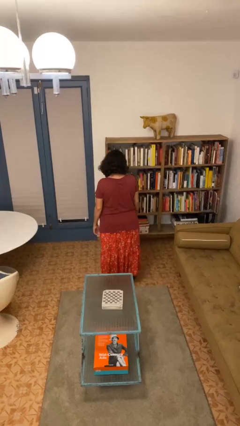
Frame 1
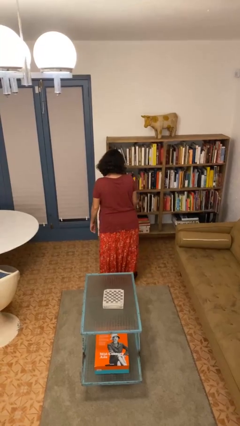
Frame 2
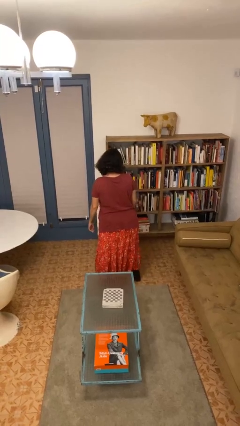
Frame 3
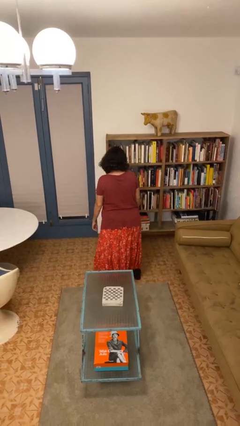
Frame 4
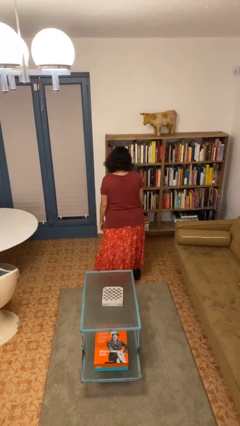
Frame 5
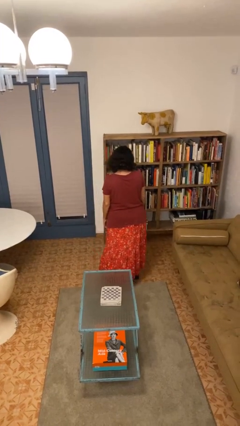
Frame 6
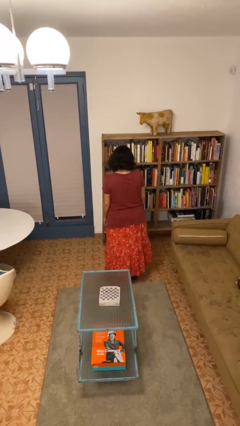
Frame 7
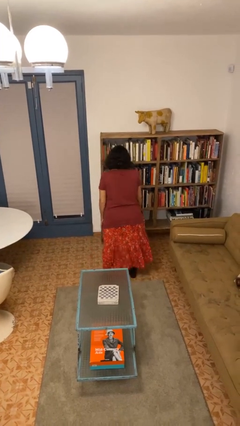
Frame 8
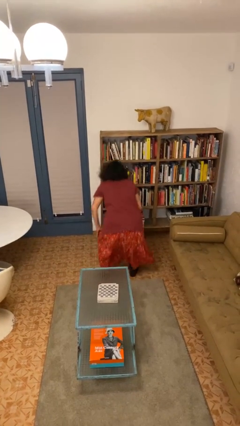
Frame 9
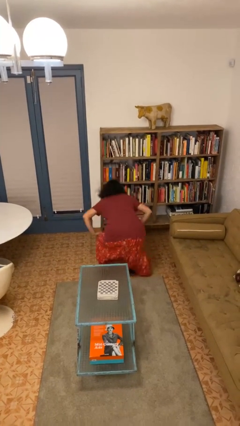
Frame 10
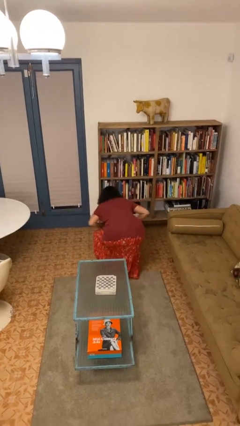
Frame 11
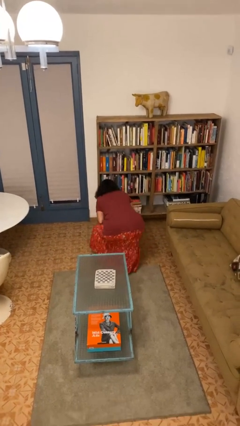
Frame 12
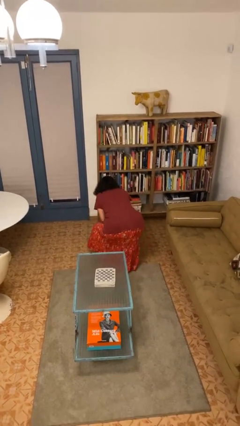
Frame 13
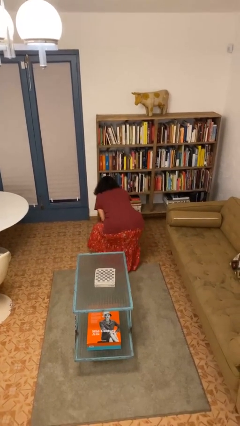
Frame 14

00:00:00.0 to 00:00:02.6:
person squats

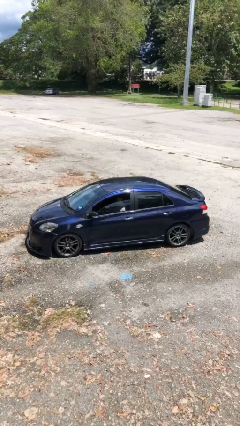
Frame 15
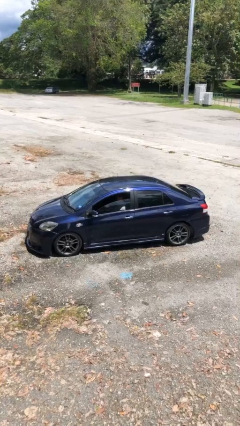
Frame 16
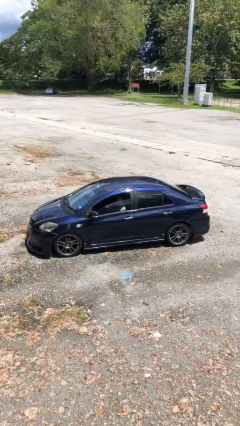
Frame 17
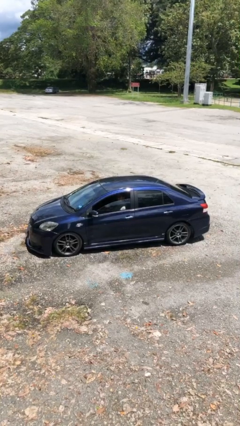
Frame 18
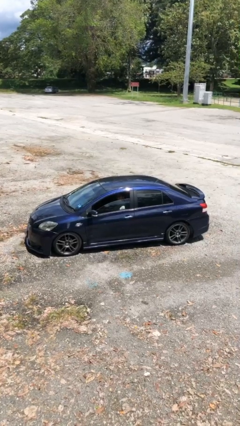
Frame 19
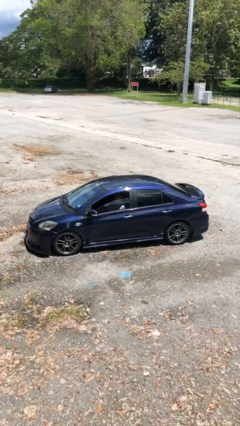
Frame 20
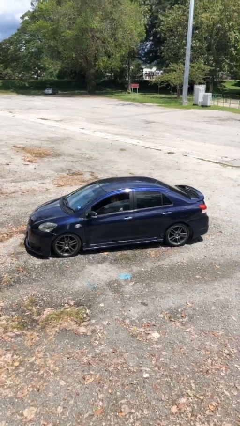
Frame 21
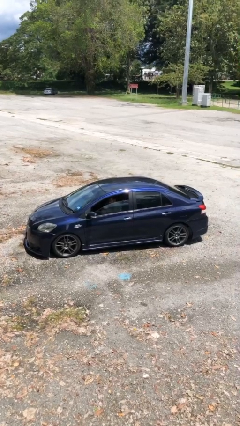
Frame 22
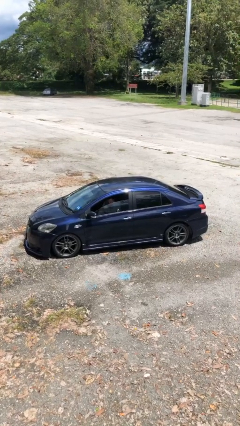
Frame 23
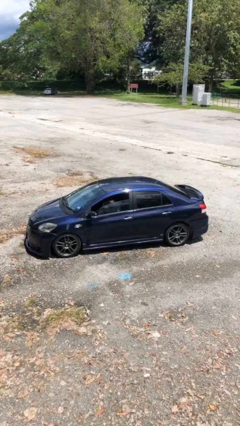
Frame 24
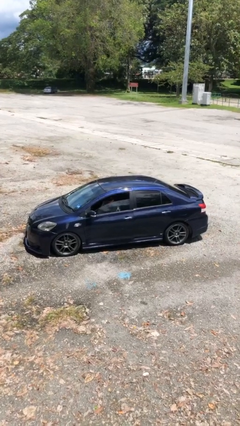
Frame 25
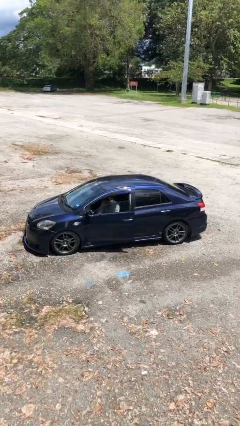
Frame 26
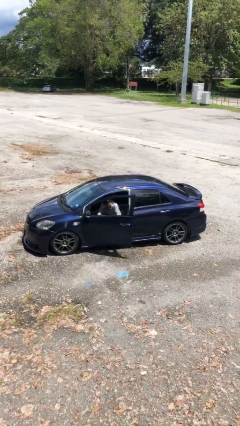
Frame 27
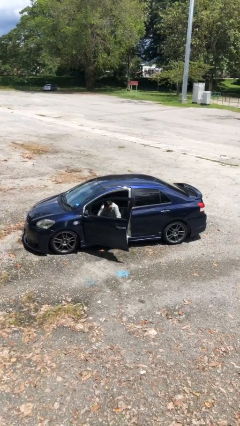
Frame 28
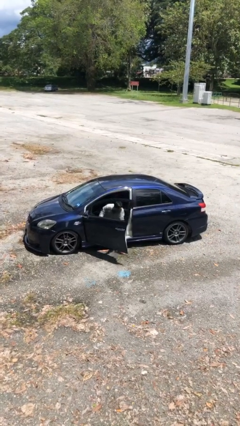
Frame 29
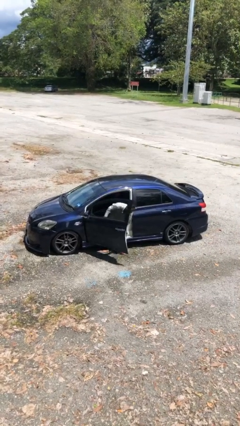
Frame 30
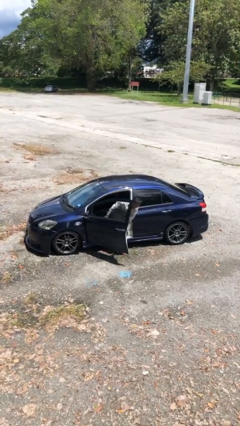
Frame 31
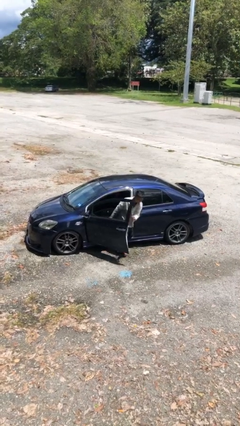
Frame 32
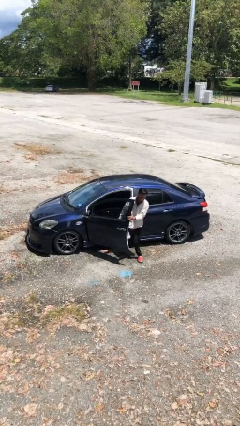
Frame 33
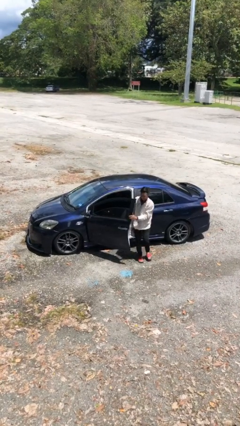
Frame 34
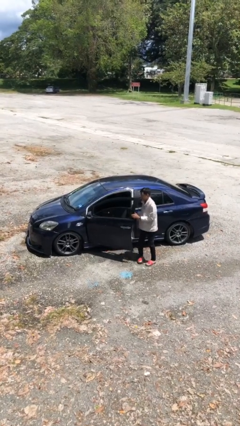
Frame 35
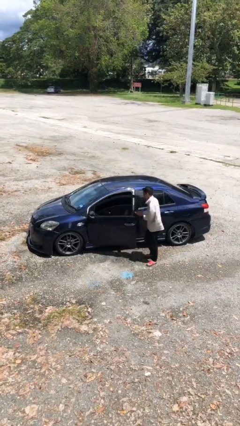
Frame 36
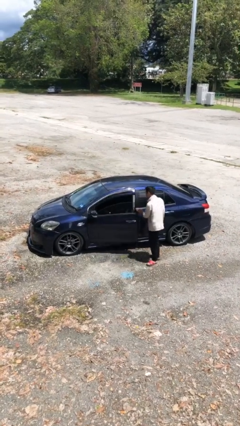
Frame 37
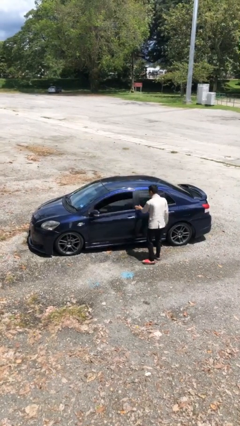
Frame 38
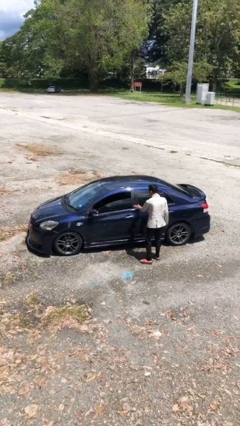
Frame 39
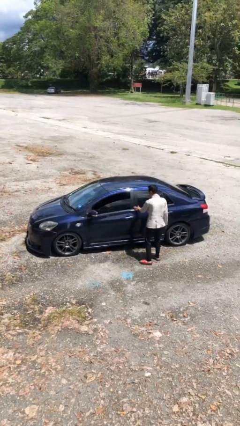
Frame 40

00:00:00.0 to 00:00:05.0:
car drops off person

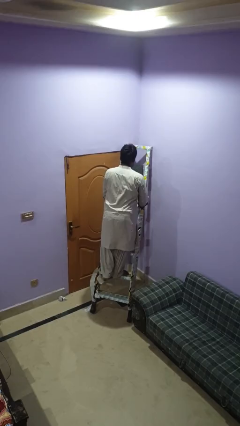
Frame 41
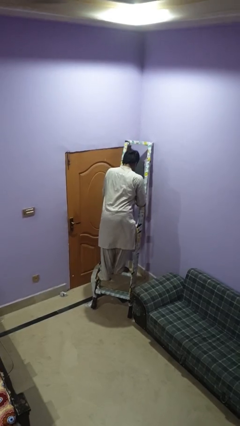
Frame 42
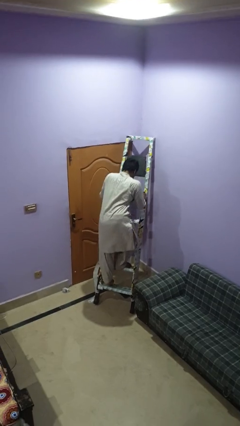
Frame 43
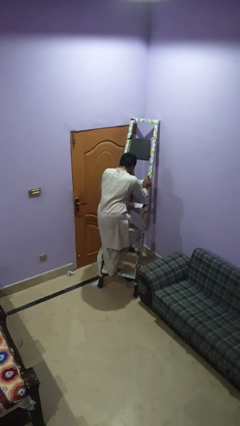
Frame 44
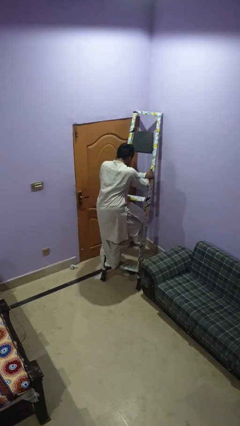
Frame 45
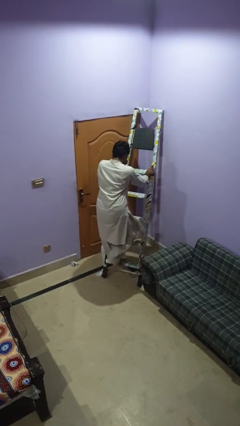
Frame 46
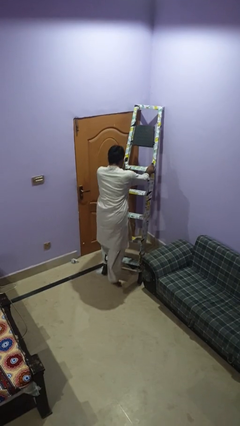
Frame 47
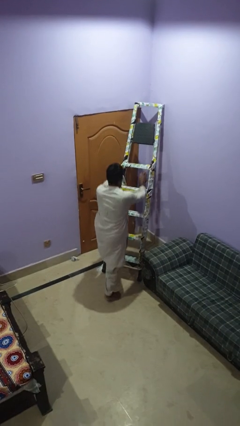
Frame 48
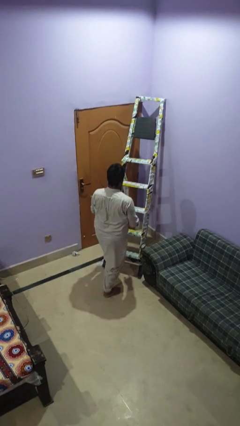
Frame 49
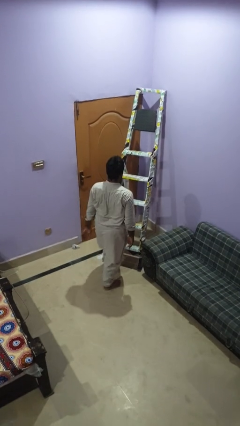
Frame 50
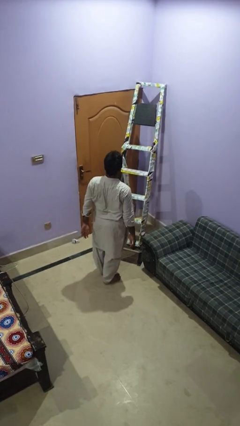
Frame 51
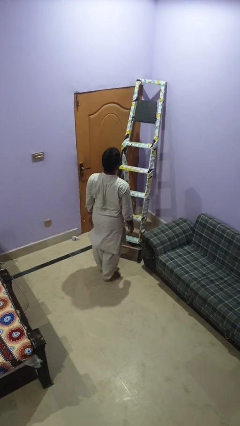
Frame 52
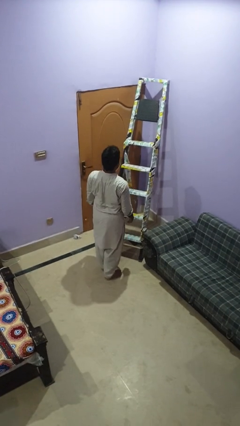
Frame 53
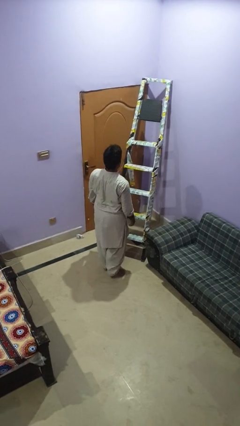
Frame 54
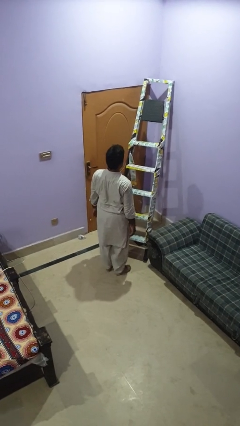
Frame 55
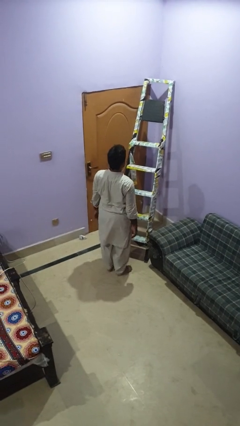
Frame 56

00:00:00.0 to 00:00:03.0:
person climbs down ladder

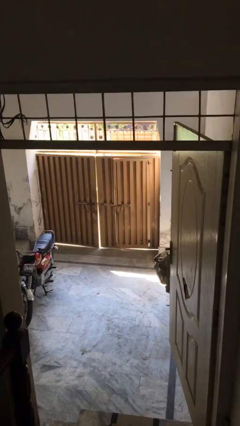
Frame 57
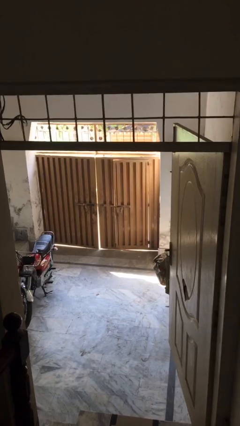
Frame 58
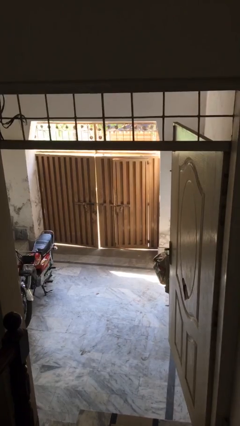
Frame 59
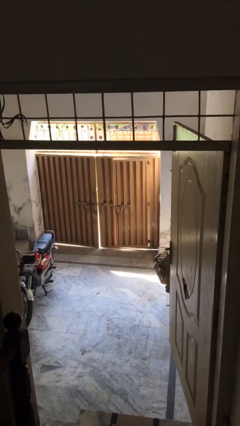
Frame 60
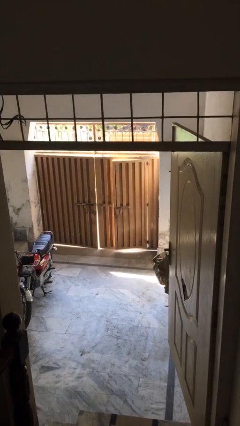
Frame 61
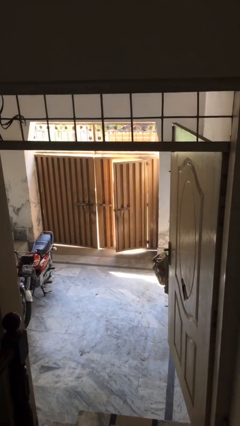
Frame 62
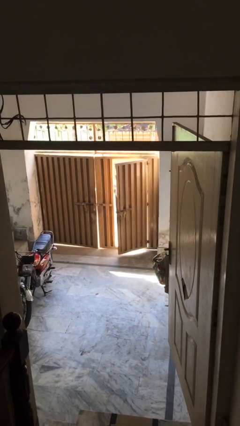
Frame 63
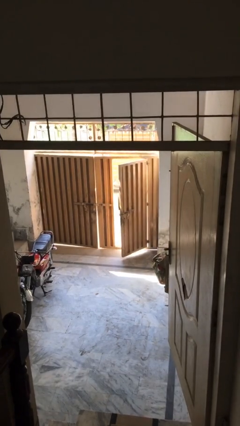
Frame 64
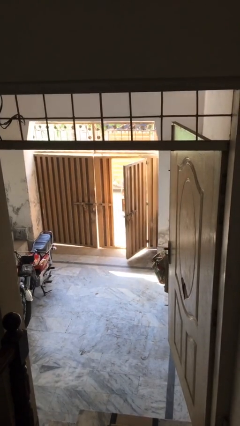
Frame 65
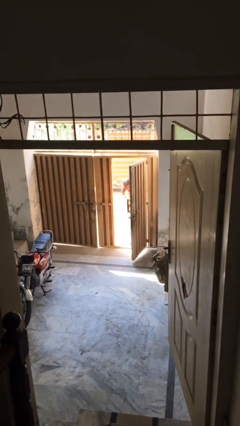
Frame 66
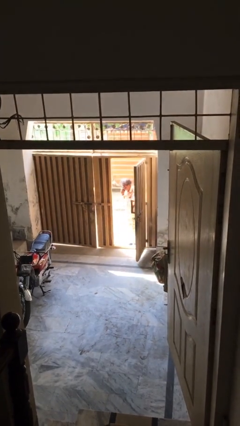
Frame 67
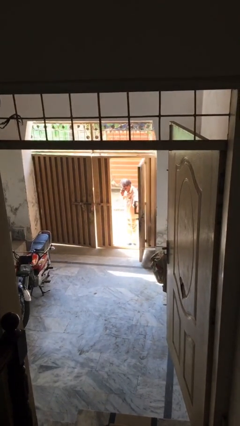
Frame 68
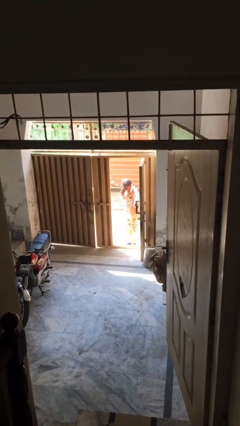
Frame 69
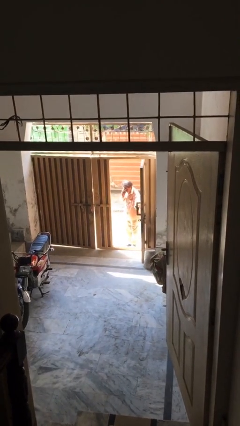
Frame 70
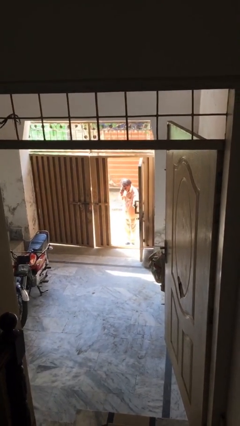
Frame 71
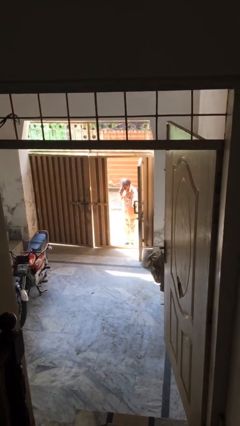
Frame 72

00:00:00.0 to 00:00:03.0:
person opens facility door

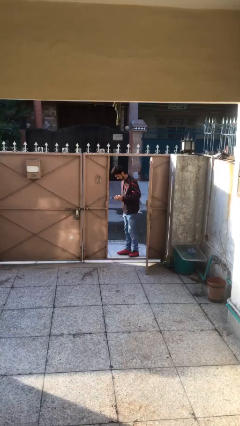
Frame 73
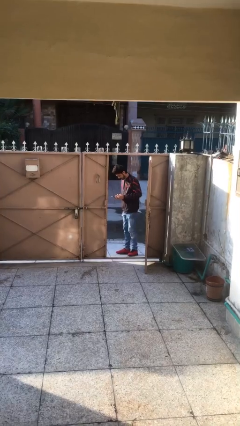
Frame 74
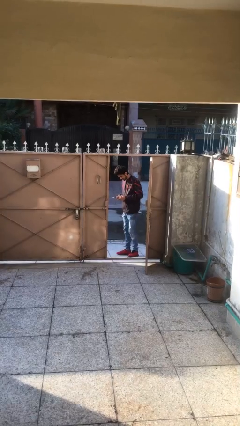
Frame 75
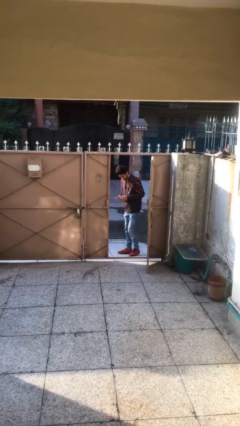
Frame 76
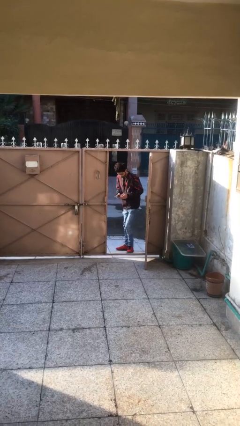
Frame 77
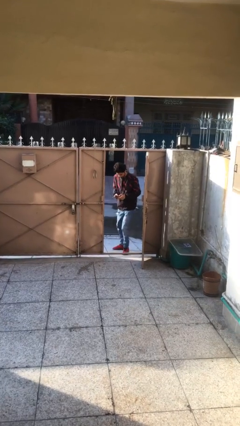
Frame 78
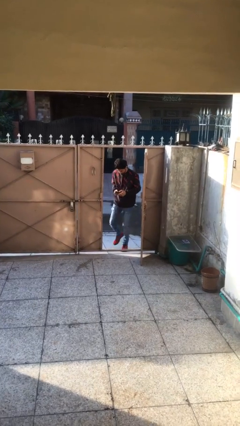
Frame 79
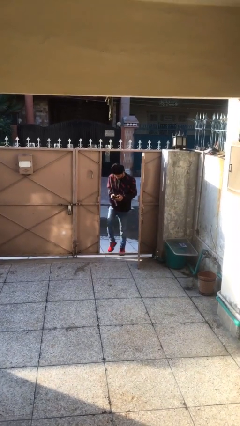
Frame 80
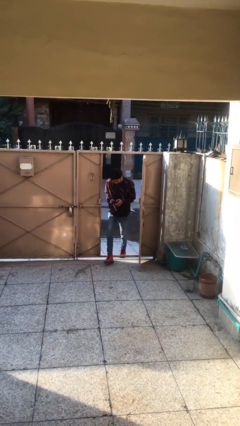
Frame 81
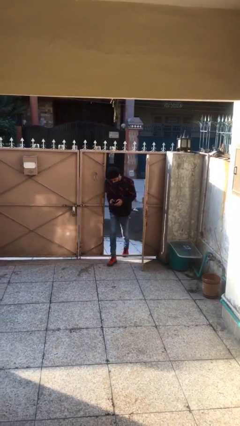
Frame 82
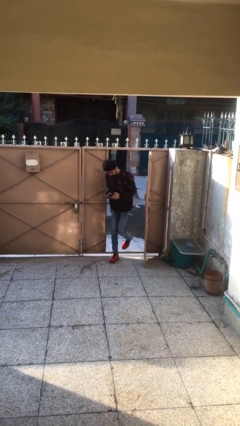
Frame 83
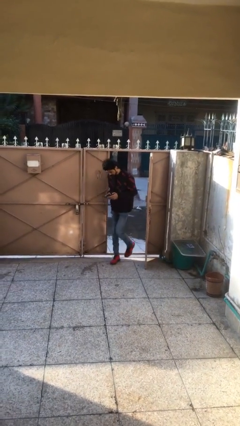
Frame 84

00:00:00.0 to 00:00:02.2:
person enters scene through structure

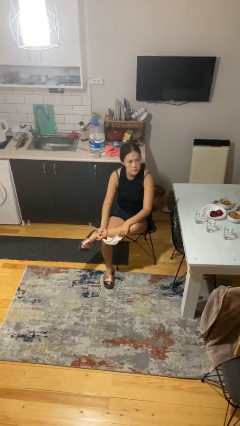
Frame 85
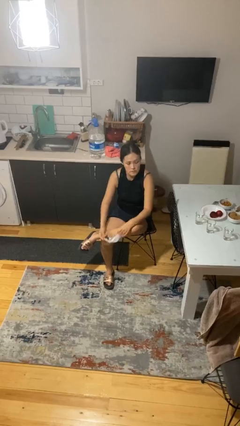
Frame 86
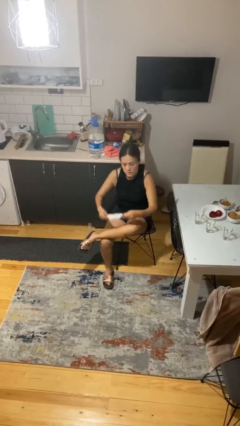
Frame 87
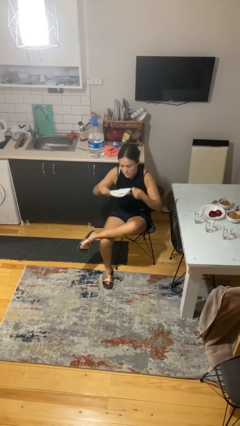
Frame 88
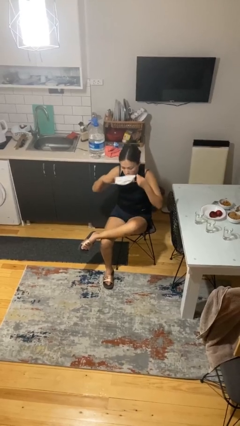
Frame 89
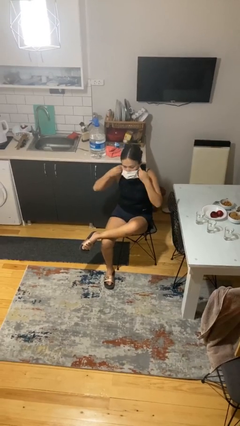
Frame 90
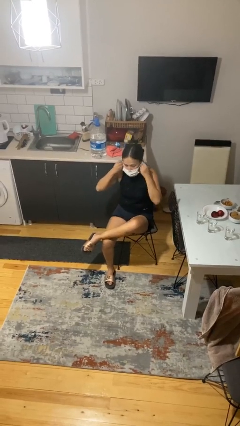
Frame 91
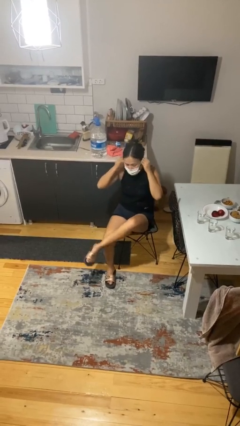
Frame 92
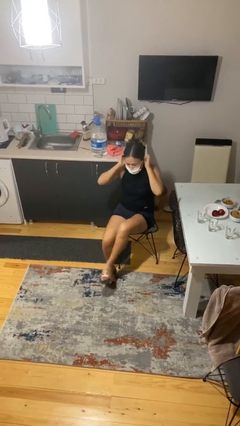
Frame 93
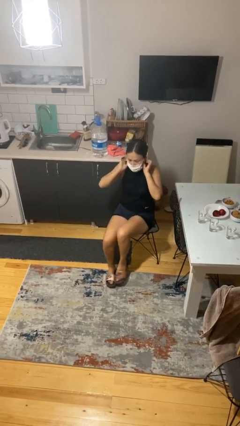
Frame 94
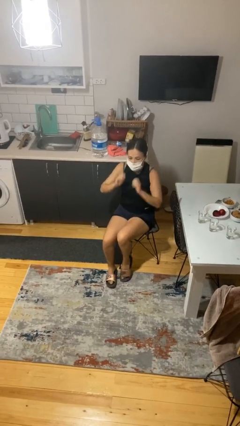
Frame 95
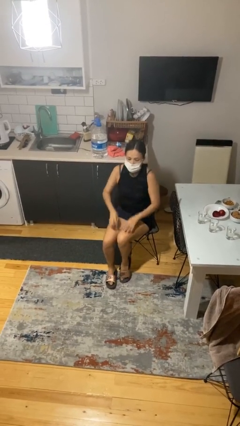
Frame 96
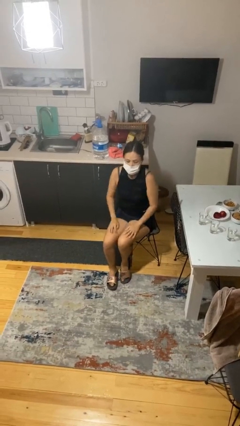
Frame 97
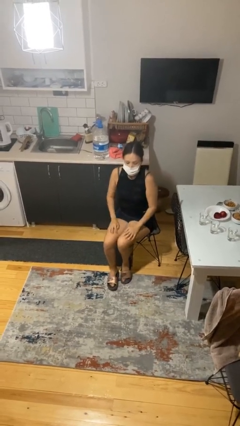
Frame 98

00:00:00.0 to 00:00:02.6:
person puts on facemask
